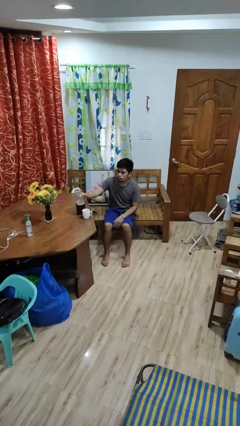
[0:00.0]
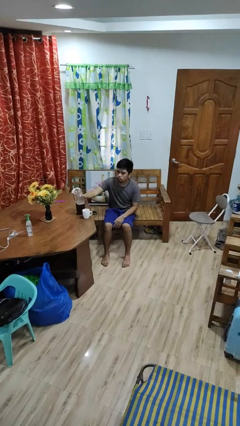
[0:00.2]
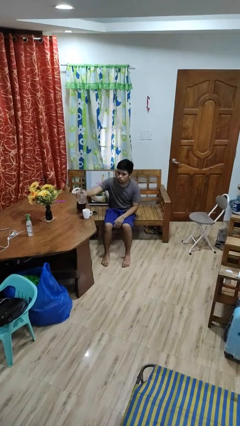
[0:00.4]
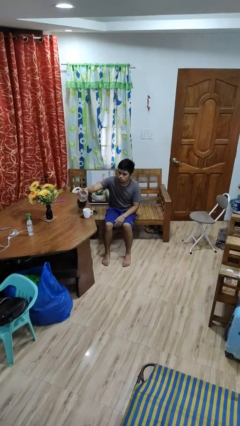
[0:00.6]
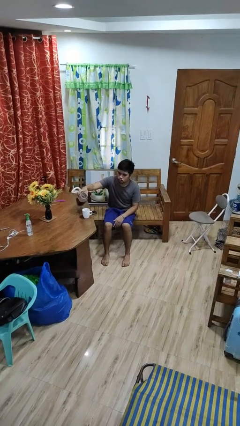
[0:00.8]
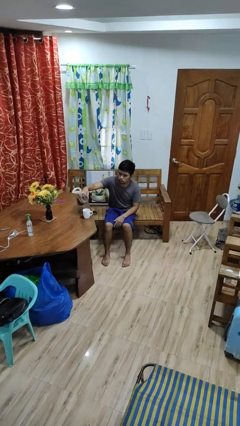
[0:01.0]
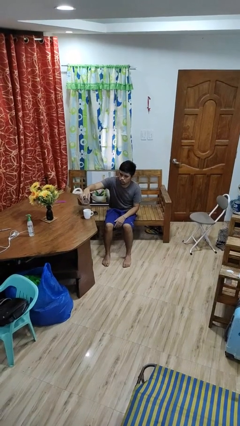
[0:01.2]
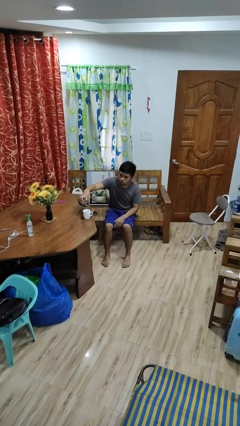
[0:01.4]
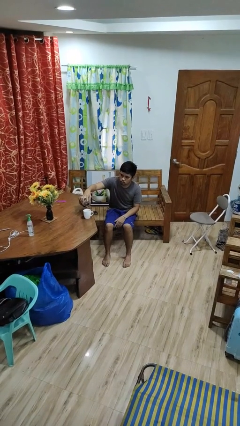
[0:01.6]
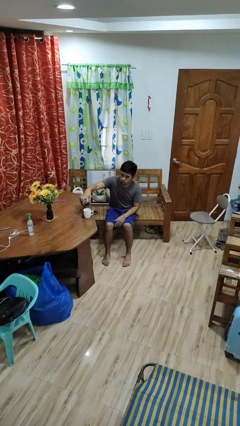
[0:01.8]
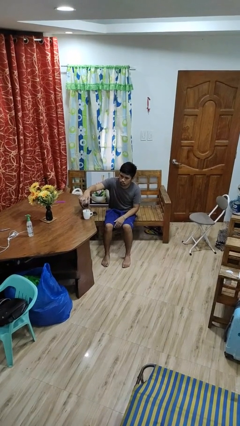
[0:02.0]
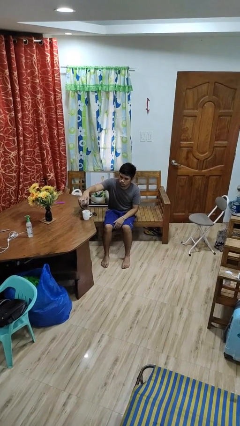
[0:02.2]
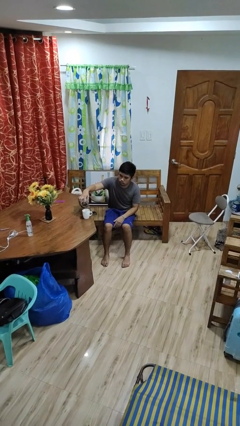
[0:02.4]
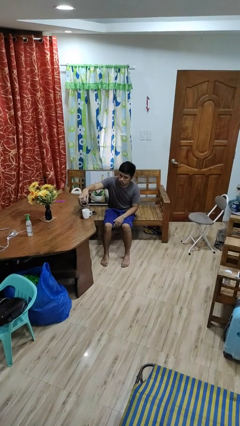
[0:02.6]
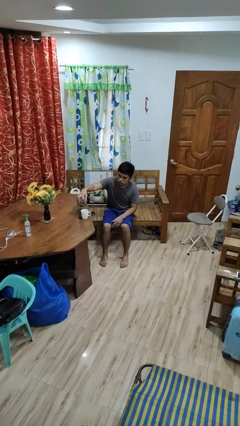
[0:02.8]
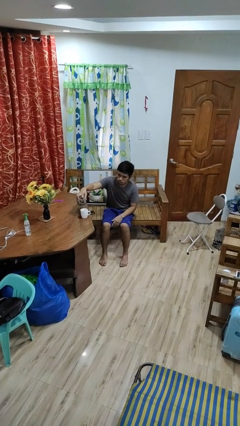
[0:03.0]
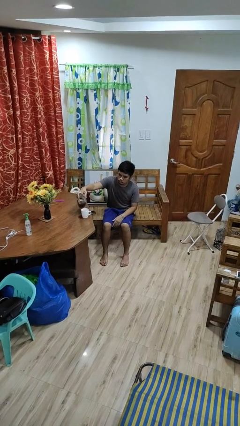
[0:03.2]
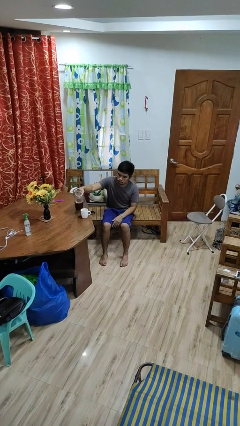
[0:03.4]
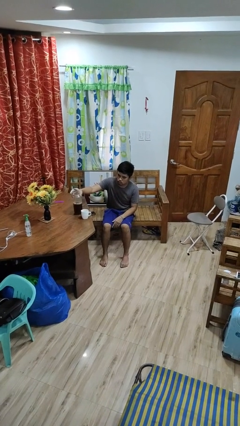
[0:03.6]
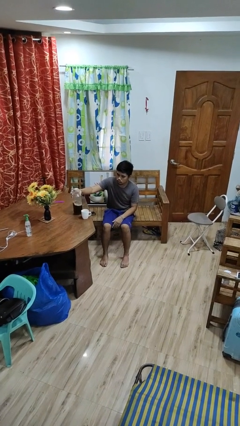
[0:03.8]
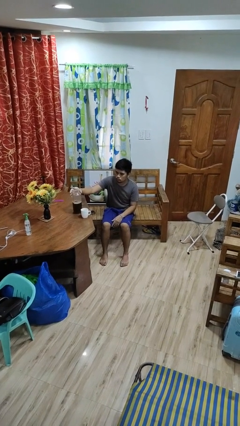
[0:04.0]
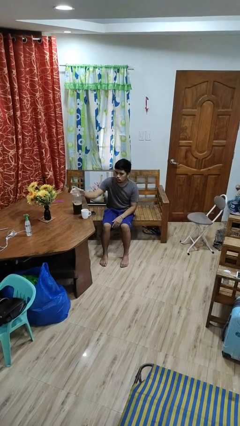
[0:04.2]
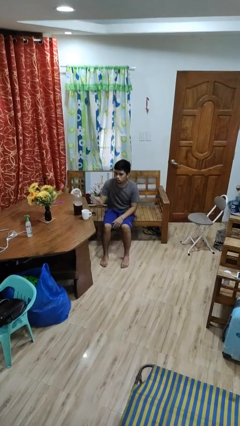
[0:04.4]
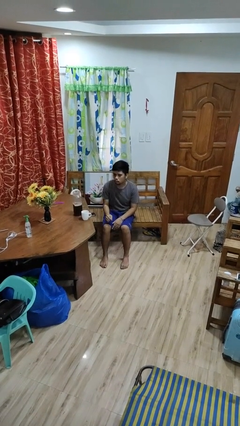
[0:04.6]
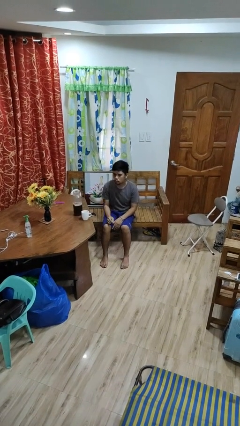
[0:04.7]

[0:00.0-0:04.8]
person pours coffee into mug

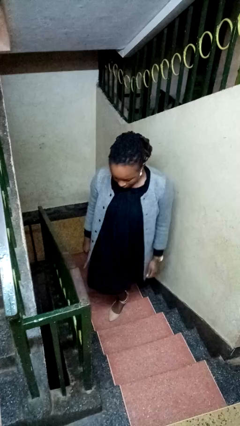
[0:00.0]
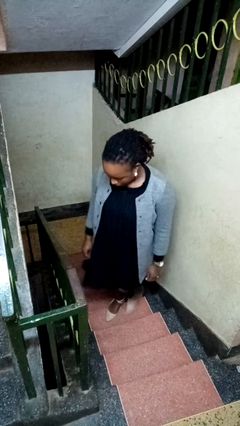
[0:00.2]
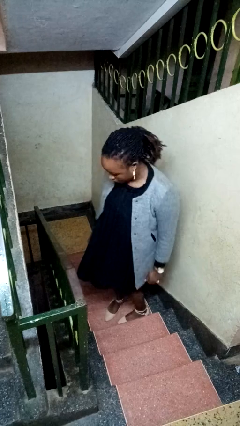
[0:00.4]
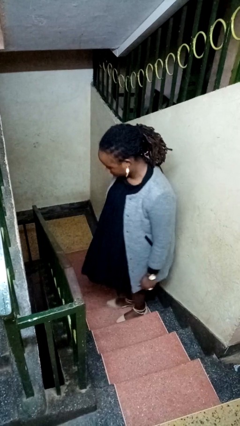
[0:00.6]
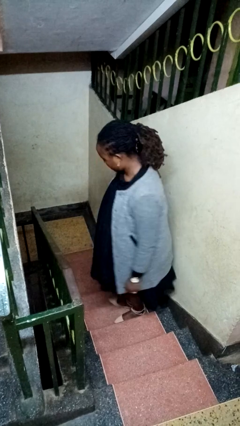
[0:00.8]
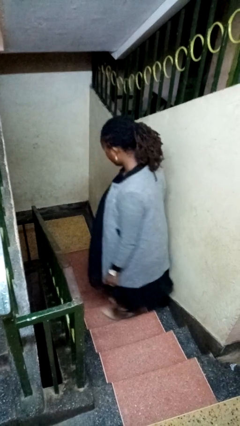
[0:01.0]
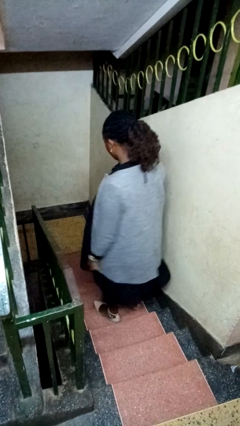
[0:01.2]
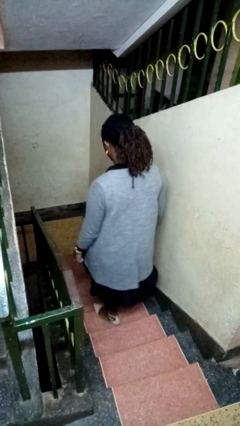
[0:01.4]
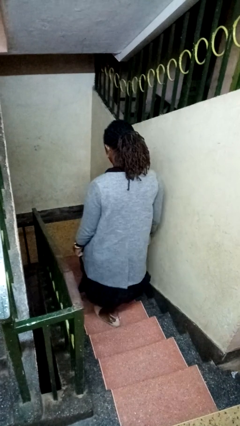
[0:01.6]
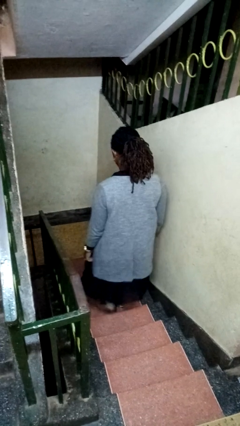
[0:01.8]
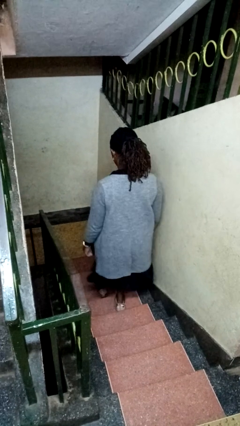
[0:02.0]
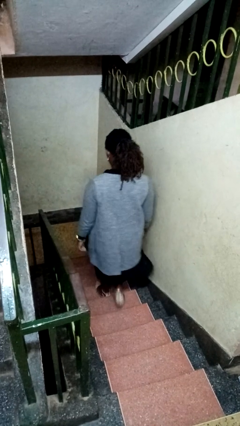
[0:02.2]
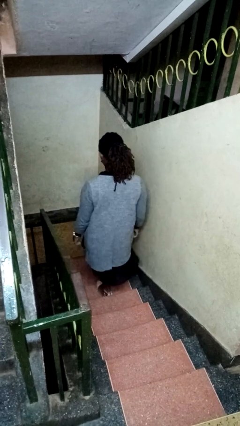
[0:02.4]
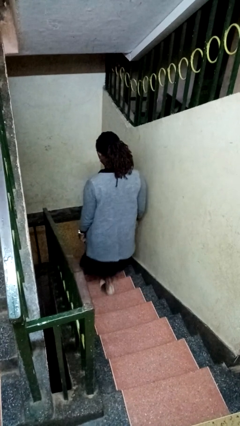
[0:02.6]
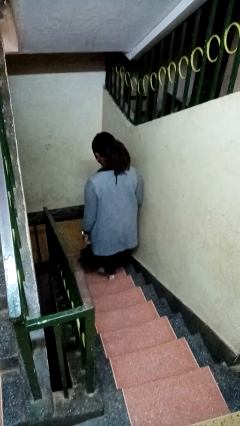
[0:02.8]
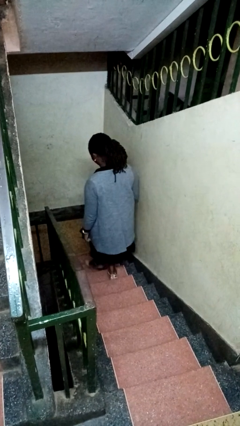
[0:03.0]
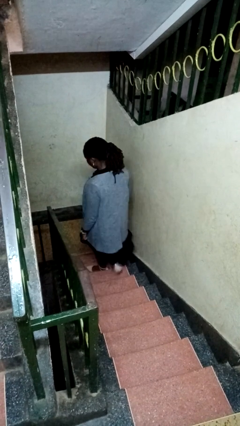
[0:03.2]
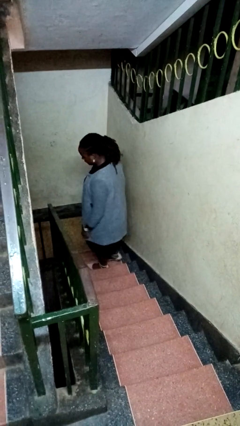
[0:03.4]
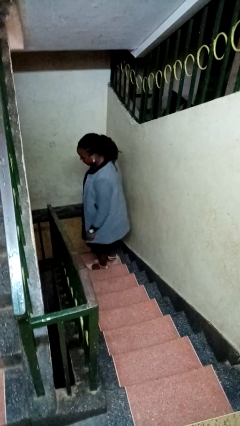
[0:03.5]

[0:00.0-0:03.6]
person climbs down stairs

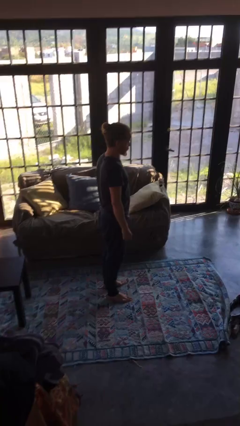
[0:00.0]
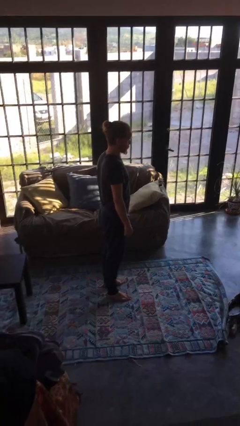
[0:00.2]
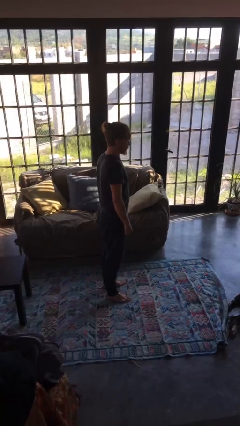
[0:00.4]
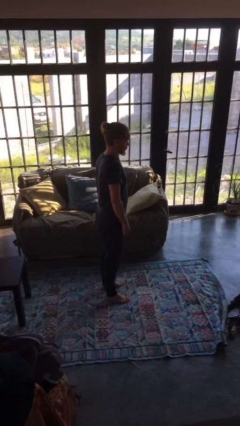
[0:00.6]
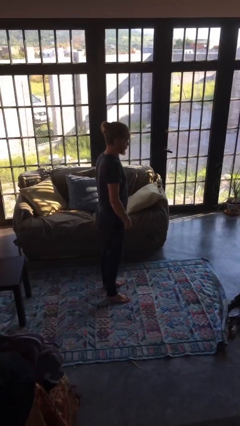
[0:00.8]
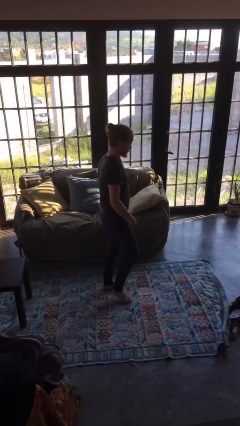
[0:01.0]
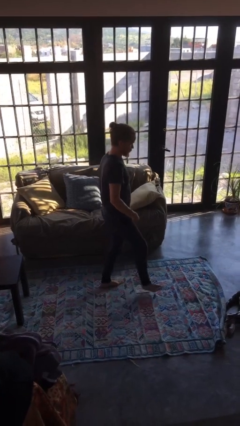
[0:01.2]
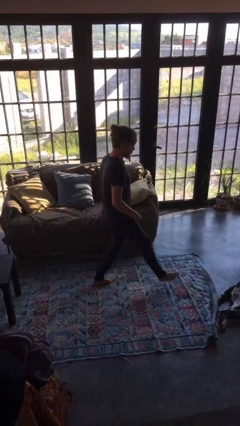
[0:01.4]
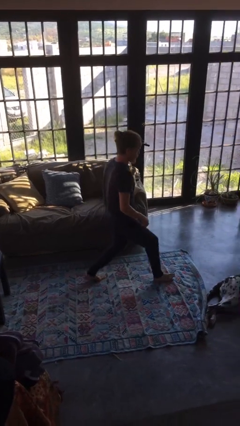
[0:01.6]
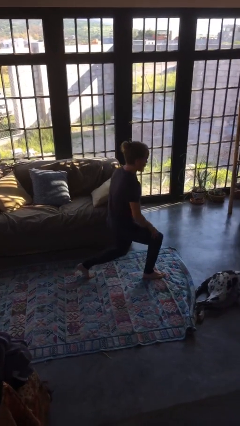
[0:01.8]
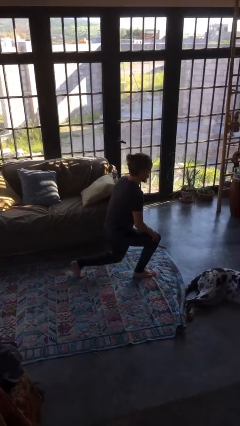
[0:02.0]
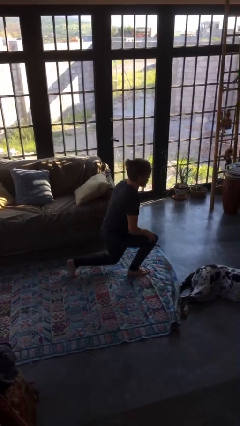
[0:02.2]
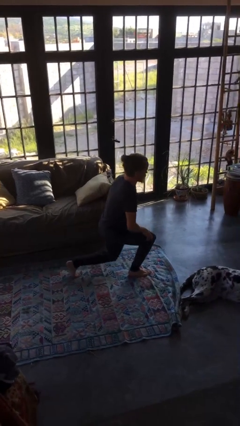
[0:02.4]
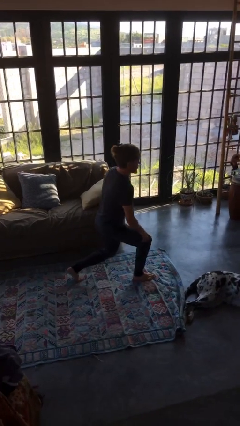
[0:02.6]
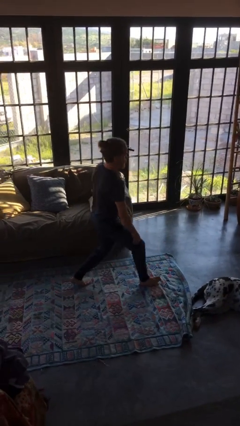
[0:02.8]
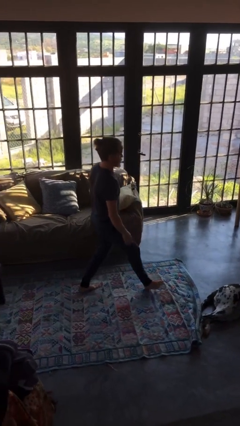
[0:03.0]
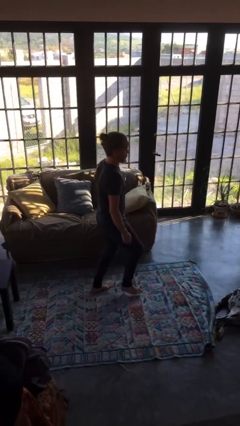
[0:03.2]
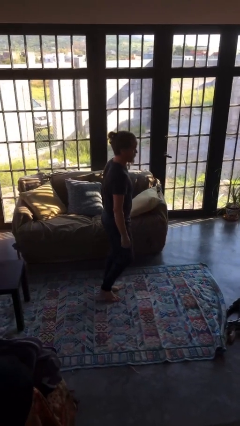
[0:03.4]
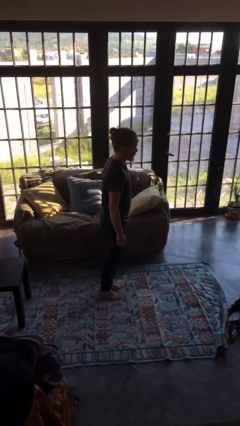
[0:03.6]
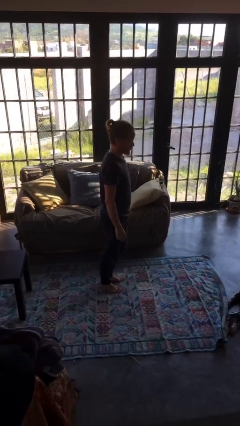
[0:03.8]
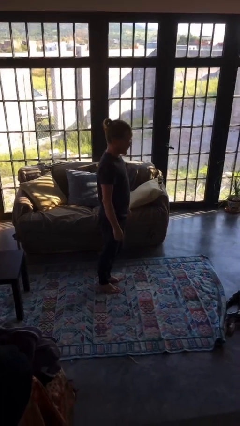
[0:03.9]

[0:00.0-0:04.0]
person exercises with lunges

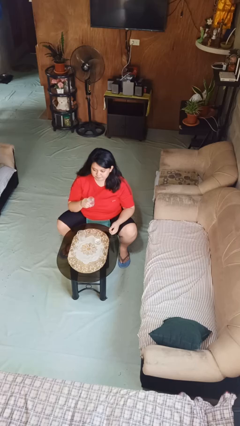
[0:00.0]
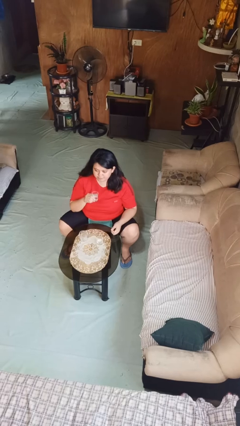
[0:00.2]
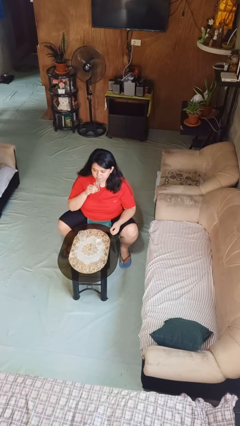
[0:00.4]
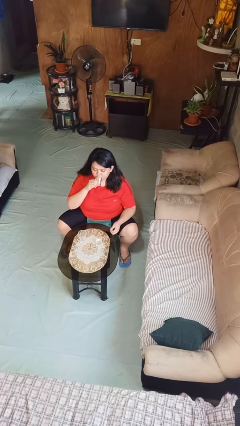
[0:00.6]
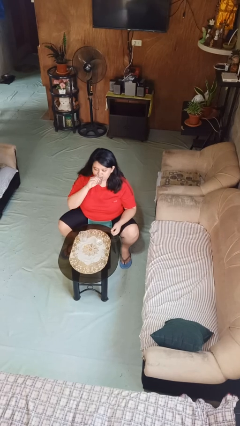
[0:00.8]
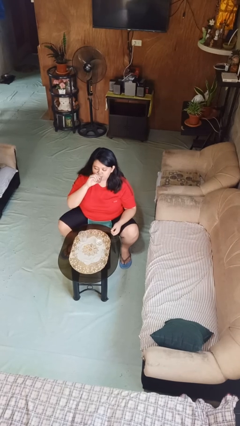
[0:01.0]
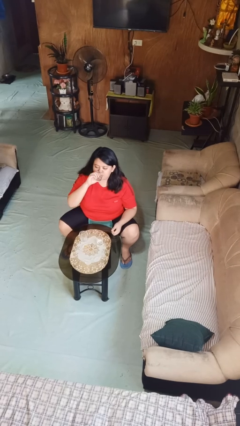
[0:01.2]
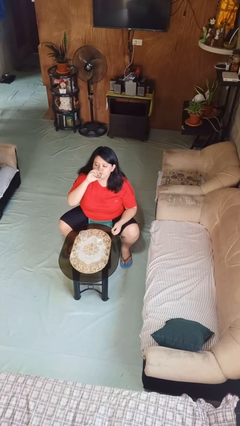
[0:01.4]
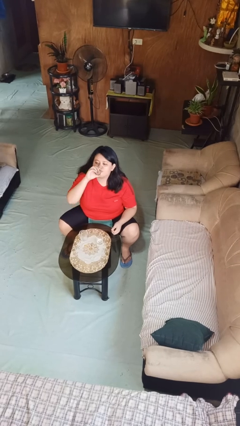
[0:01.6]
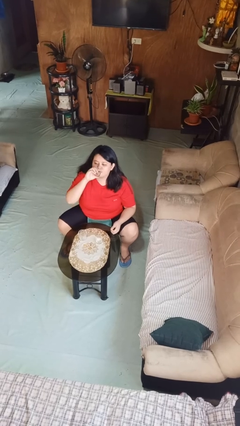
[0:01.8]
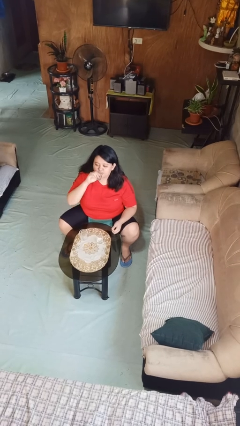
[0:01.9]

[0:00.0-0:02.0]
person drinks from shotglass

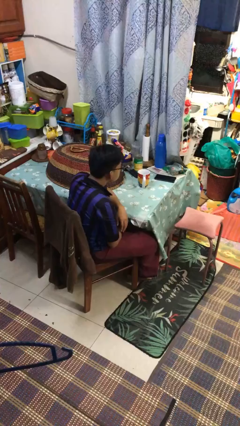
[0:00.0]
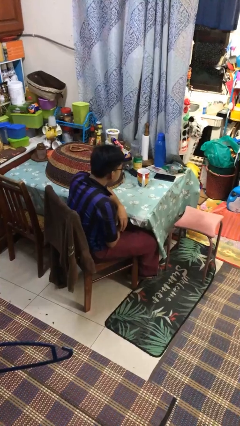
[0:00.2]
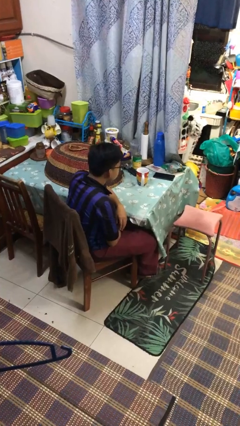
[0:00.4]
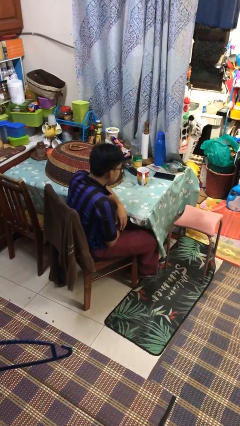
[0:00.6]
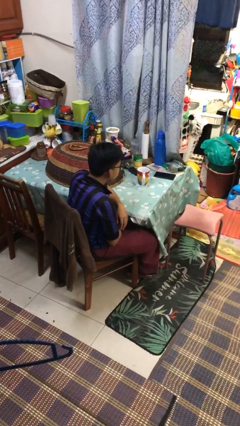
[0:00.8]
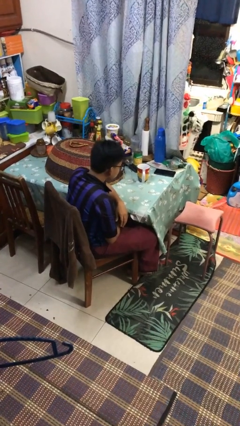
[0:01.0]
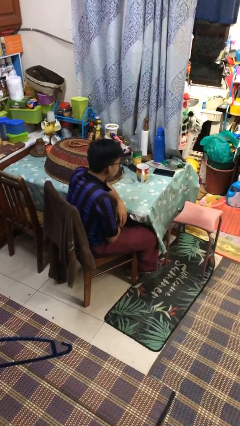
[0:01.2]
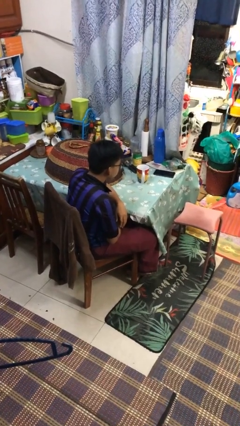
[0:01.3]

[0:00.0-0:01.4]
person nods head

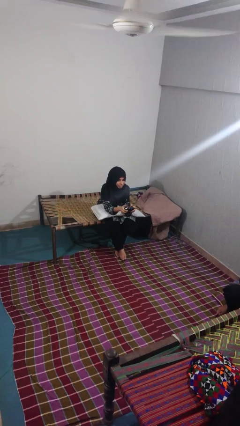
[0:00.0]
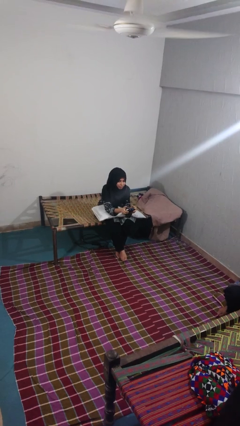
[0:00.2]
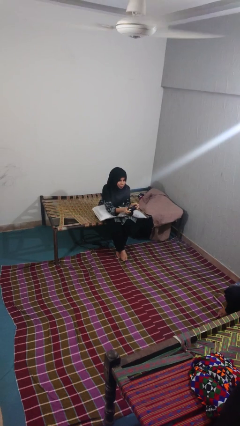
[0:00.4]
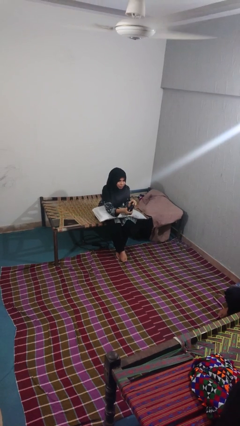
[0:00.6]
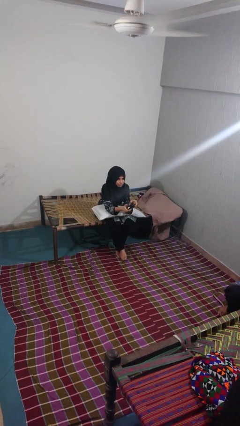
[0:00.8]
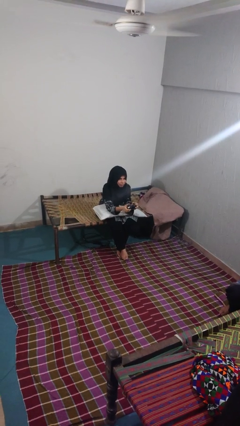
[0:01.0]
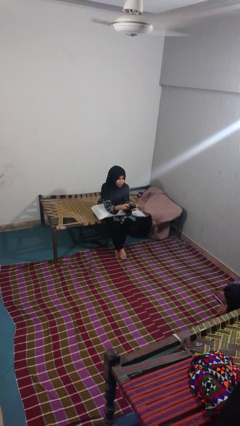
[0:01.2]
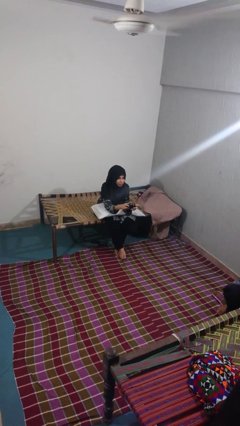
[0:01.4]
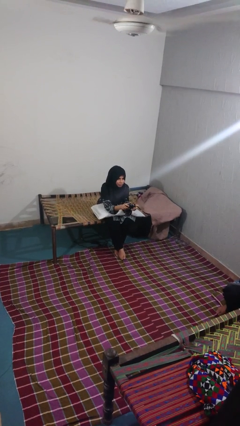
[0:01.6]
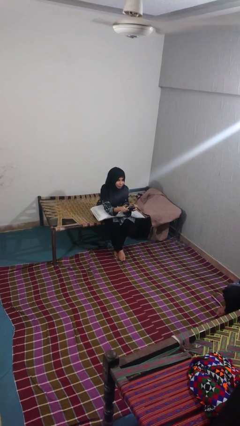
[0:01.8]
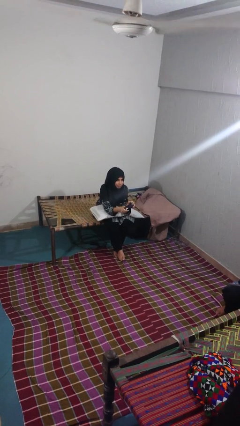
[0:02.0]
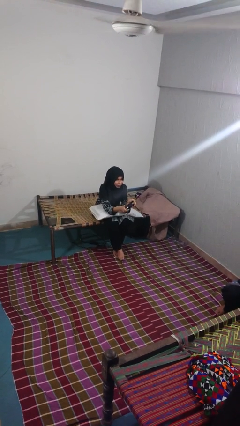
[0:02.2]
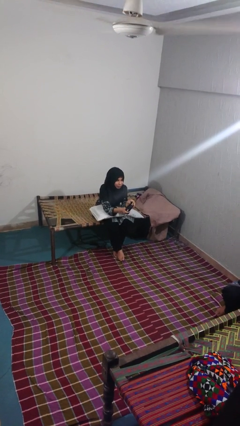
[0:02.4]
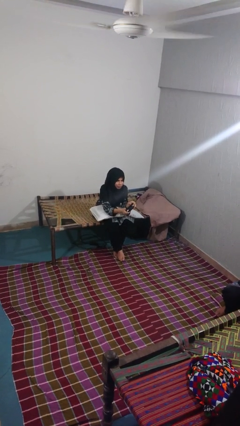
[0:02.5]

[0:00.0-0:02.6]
person interacts with handheld game
